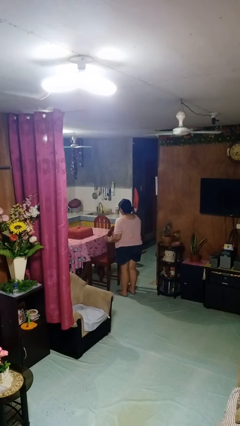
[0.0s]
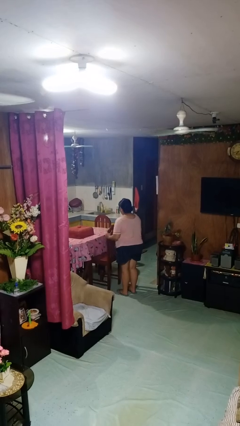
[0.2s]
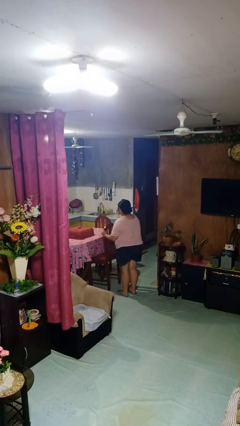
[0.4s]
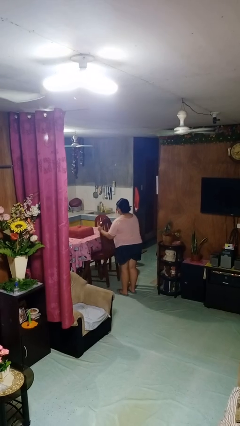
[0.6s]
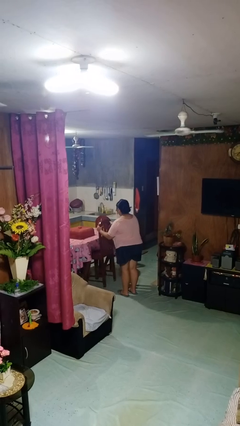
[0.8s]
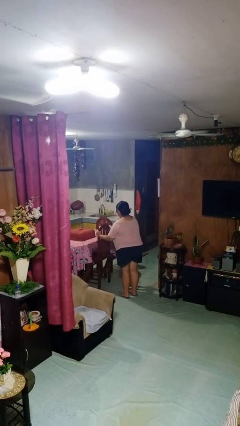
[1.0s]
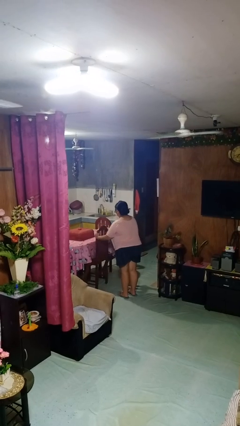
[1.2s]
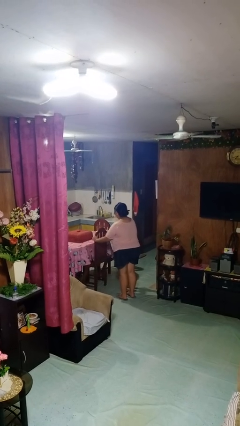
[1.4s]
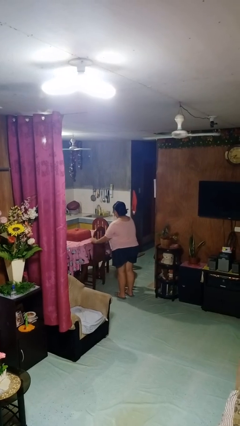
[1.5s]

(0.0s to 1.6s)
person pushes in chair

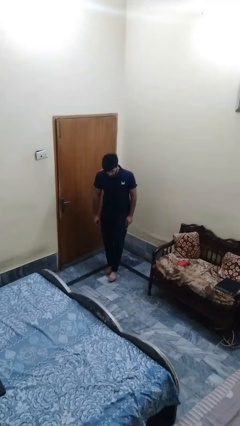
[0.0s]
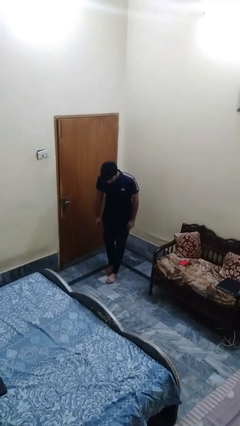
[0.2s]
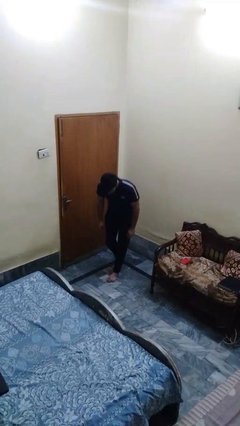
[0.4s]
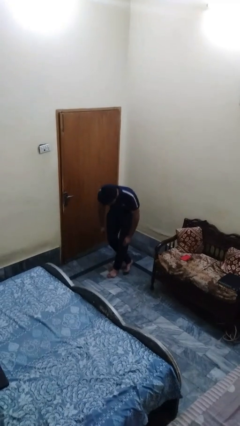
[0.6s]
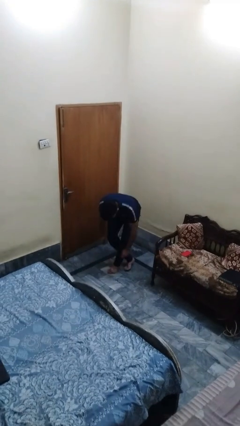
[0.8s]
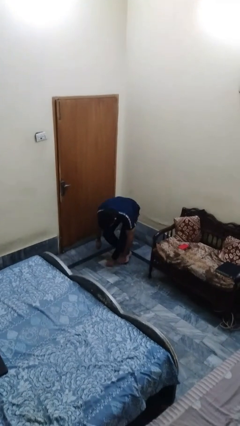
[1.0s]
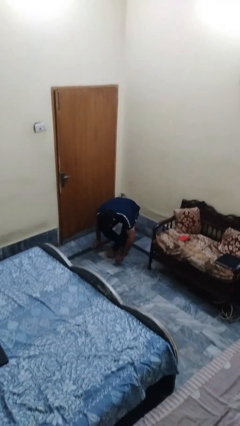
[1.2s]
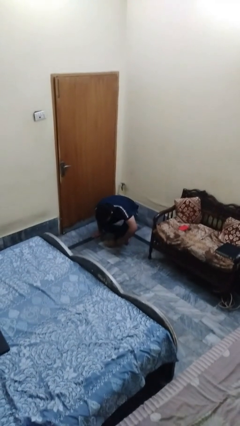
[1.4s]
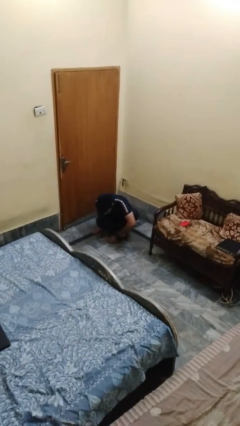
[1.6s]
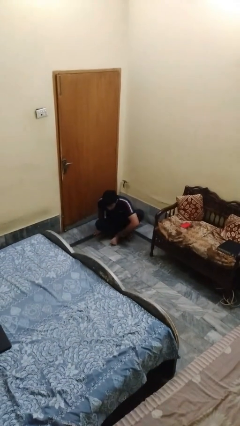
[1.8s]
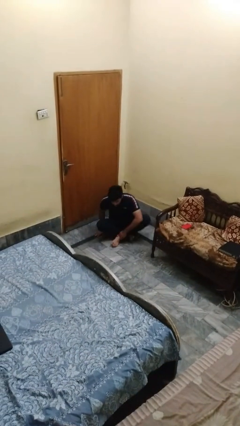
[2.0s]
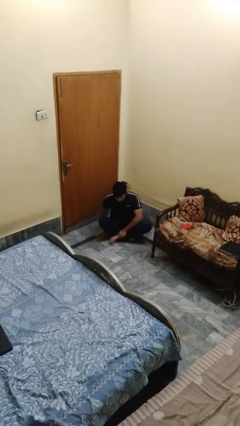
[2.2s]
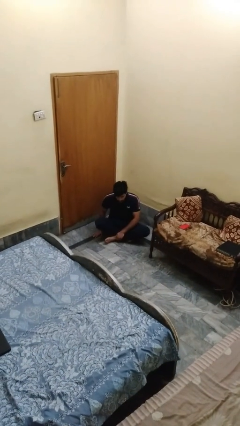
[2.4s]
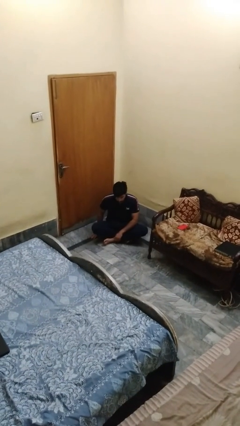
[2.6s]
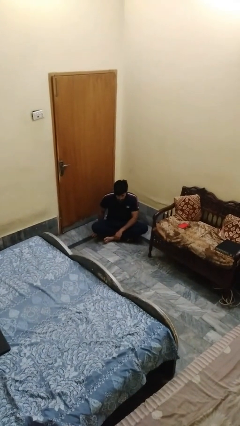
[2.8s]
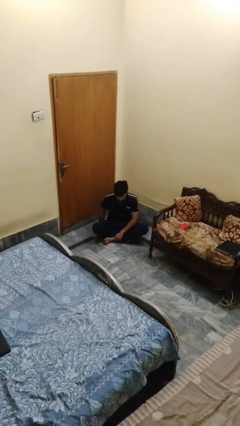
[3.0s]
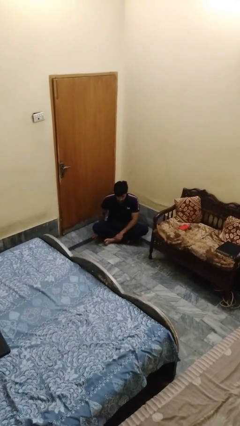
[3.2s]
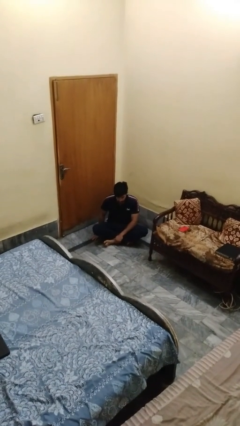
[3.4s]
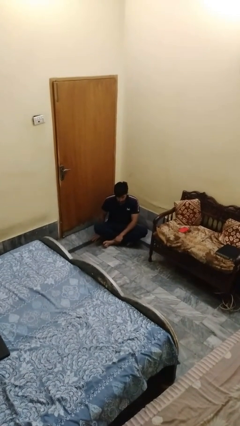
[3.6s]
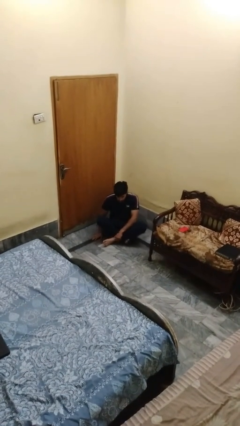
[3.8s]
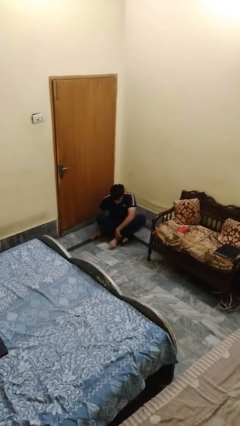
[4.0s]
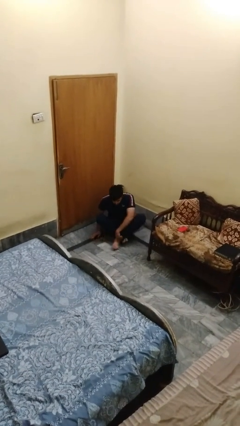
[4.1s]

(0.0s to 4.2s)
person sits crisscross

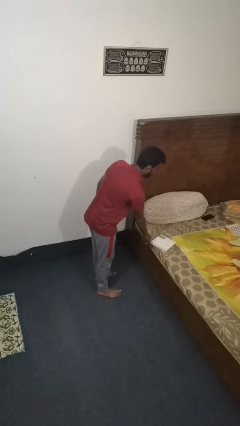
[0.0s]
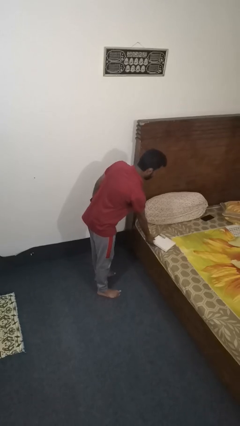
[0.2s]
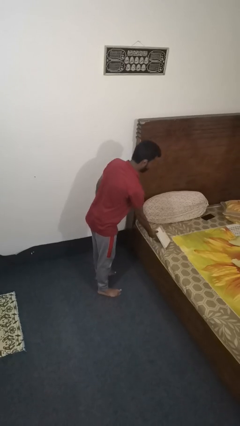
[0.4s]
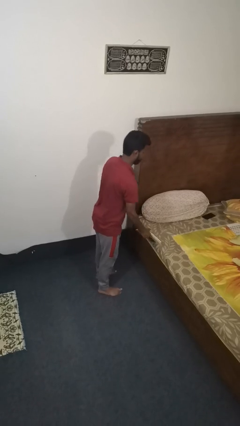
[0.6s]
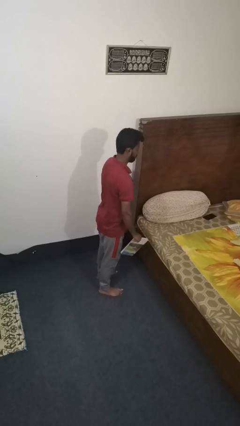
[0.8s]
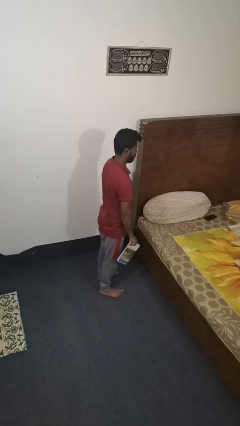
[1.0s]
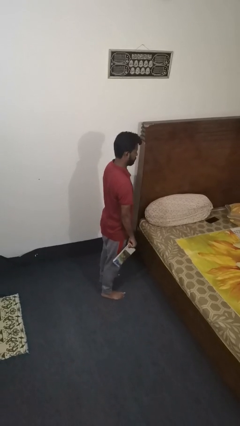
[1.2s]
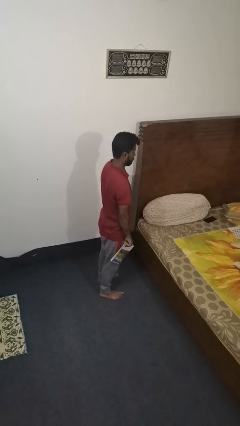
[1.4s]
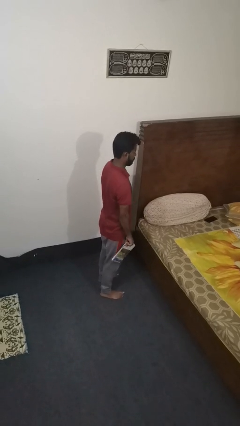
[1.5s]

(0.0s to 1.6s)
person picks up object from bed

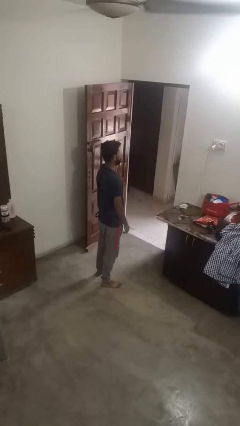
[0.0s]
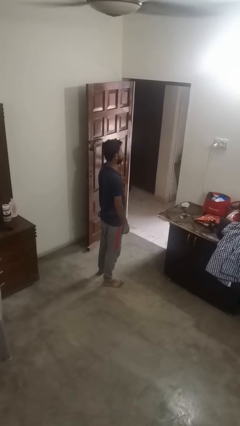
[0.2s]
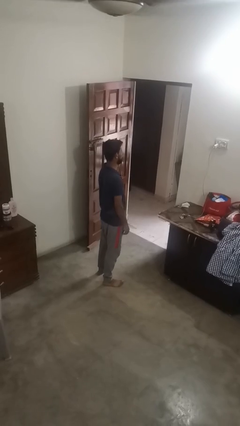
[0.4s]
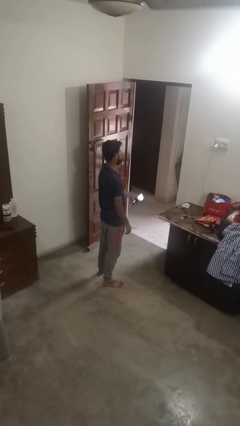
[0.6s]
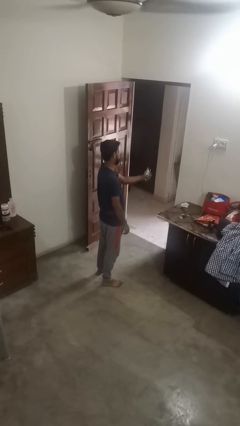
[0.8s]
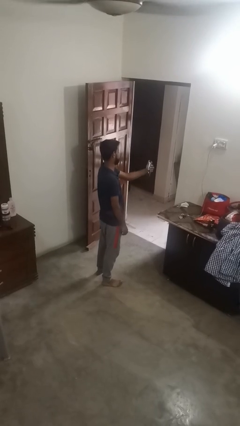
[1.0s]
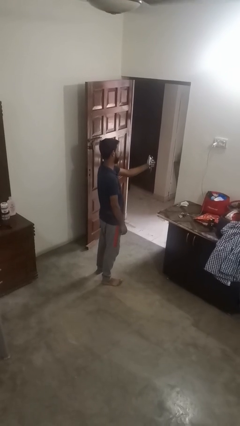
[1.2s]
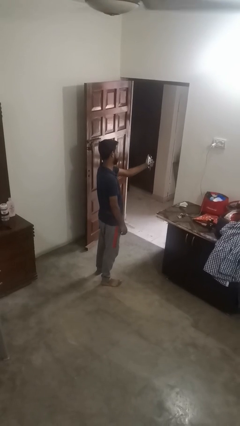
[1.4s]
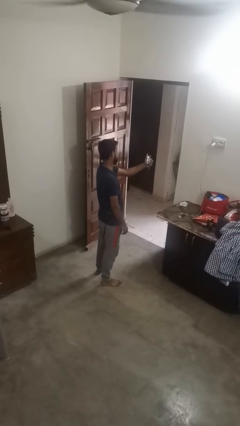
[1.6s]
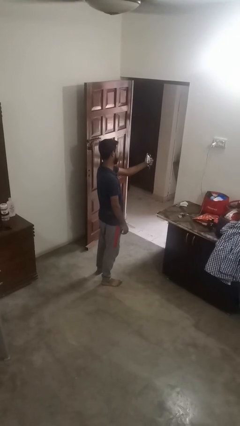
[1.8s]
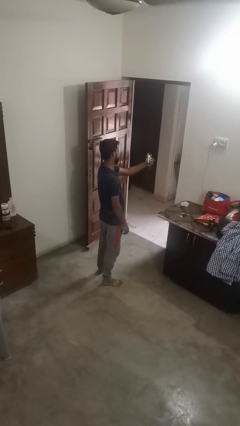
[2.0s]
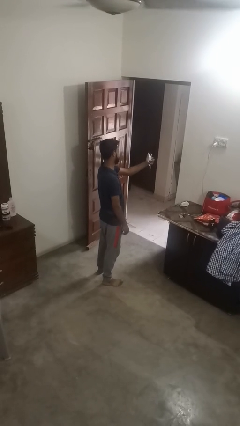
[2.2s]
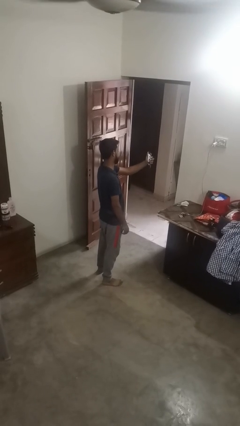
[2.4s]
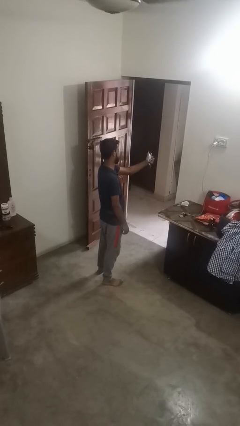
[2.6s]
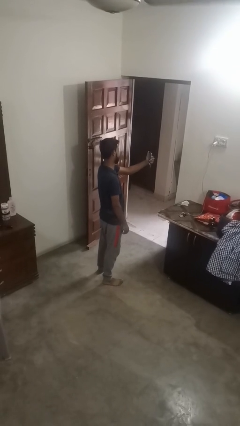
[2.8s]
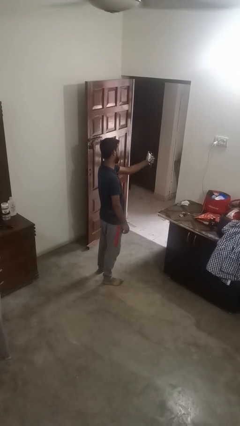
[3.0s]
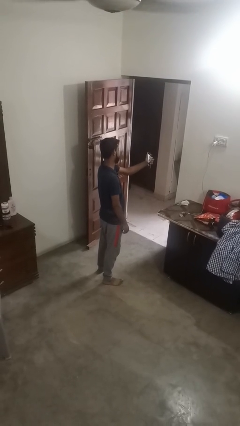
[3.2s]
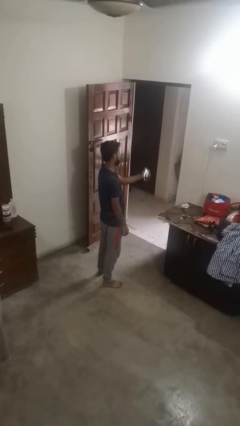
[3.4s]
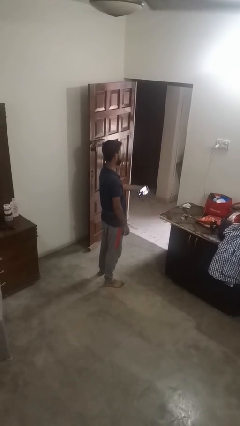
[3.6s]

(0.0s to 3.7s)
person takes selfie

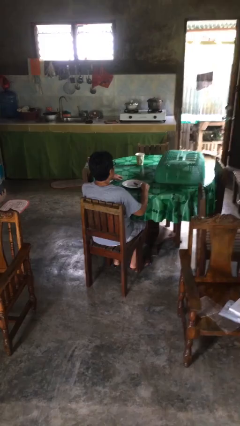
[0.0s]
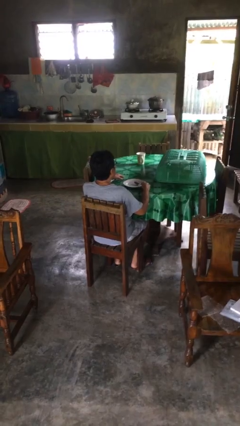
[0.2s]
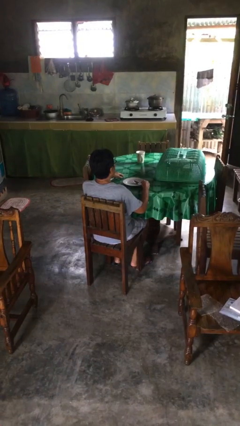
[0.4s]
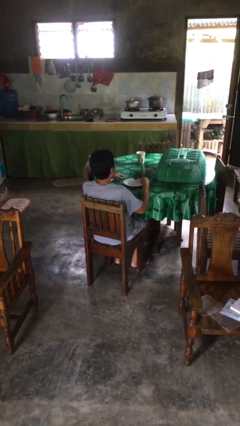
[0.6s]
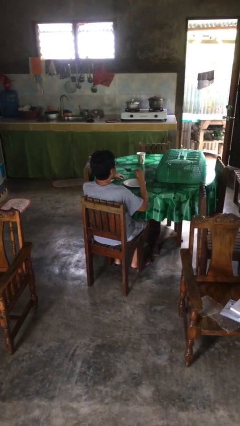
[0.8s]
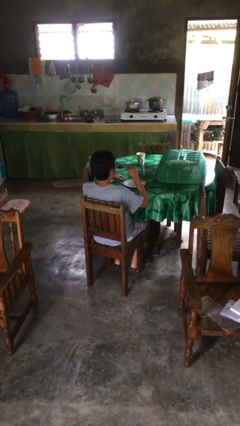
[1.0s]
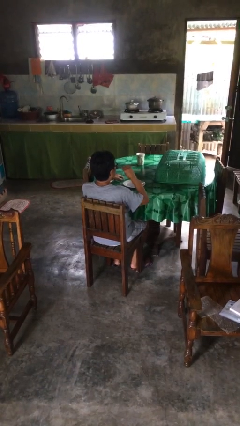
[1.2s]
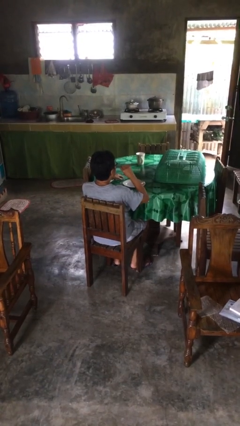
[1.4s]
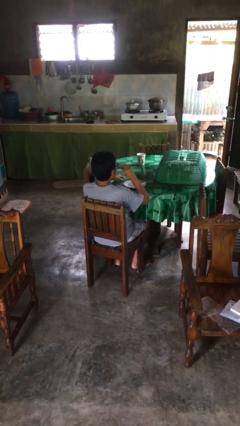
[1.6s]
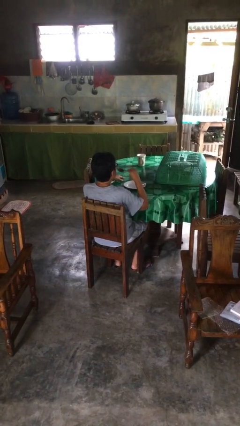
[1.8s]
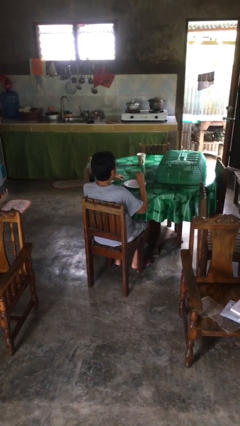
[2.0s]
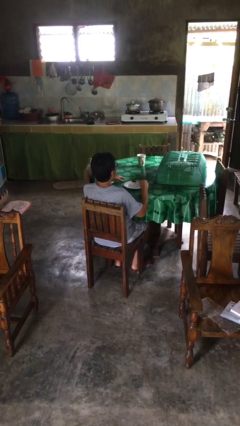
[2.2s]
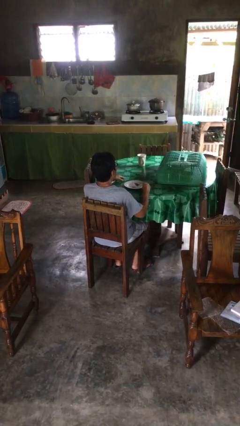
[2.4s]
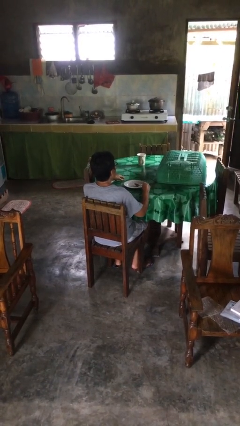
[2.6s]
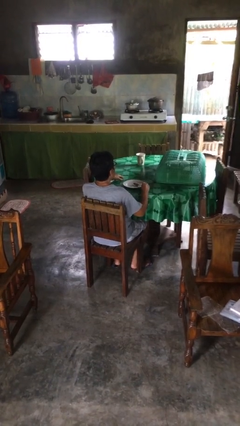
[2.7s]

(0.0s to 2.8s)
person eats with utensil

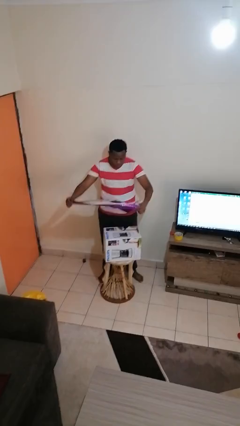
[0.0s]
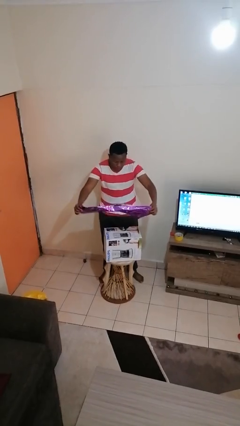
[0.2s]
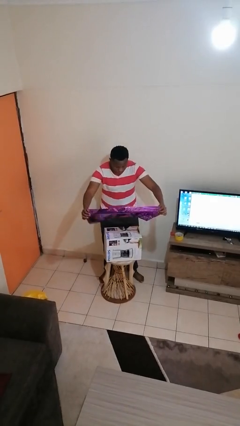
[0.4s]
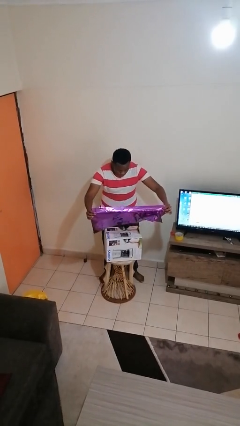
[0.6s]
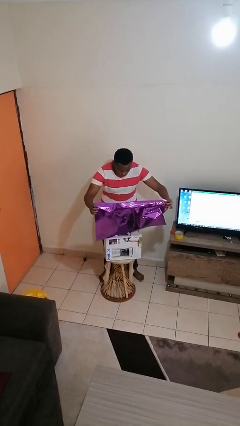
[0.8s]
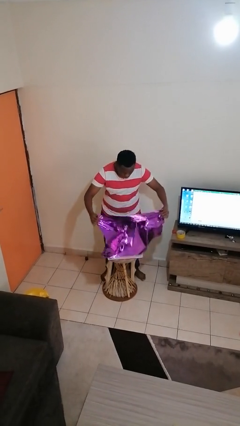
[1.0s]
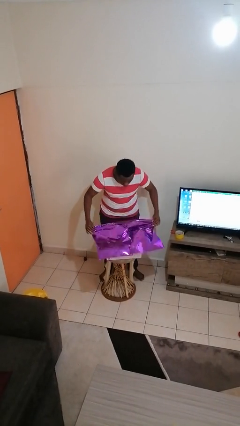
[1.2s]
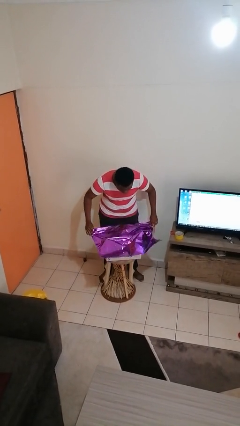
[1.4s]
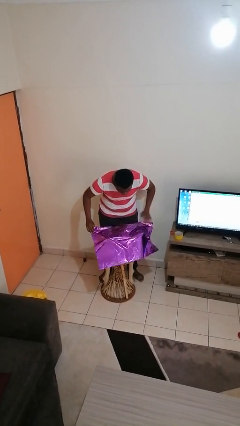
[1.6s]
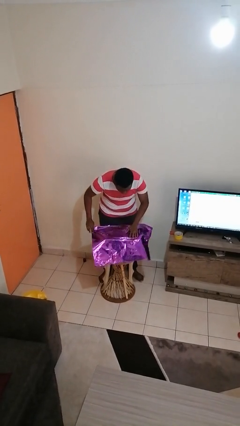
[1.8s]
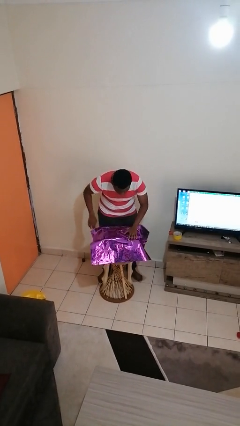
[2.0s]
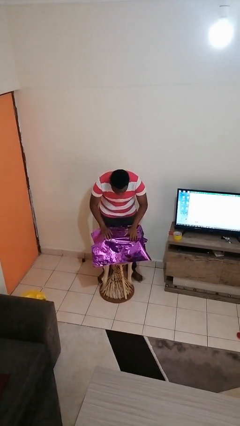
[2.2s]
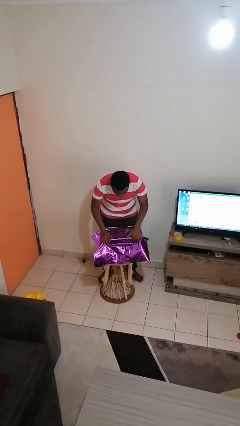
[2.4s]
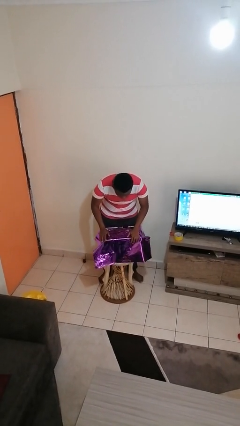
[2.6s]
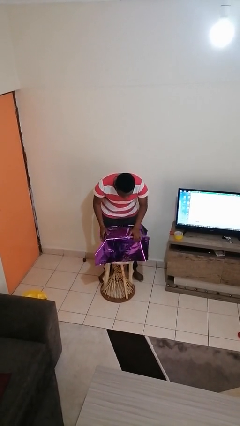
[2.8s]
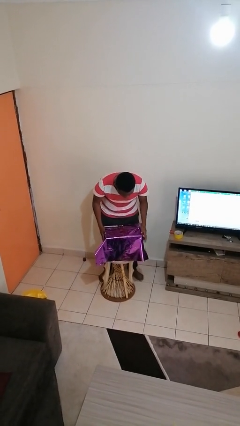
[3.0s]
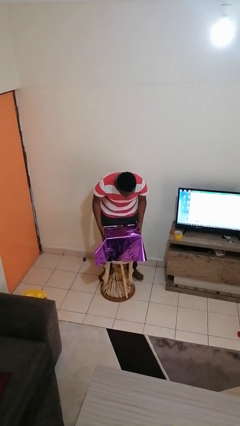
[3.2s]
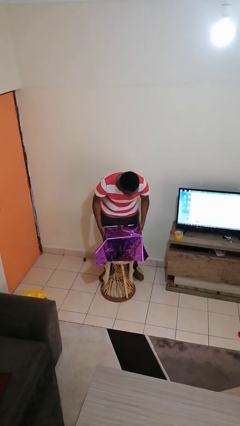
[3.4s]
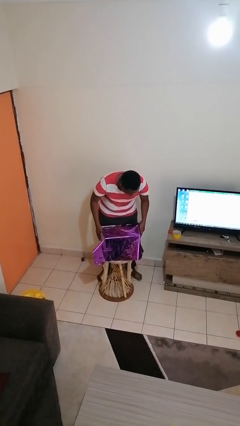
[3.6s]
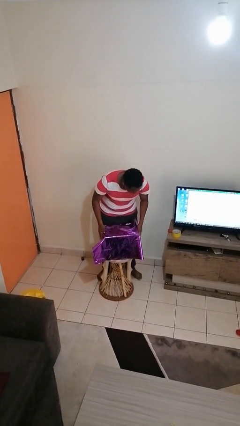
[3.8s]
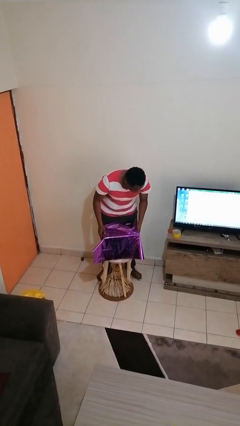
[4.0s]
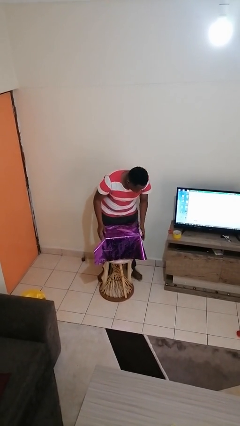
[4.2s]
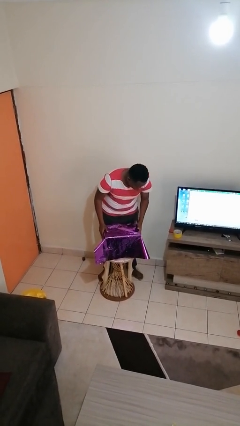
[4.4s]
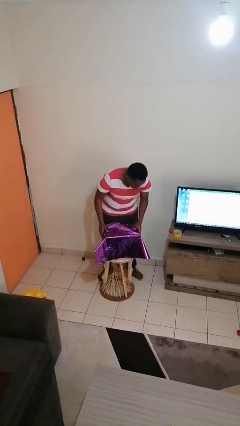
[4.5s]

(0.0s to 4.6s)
person wraps box
